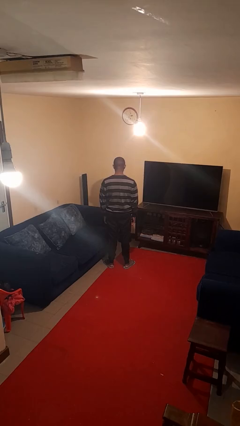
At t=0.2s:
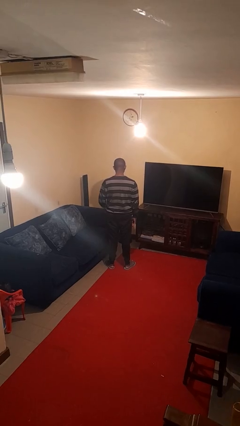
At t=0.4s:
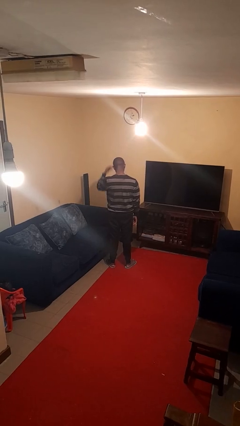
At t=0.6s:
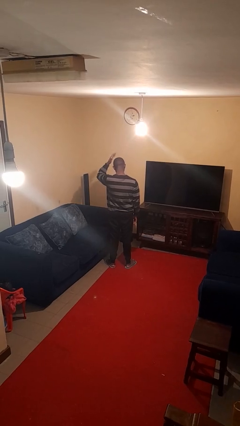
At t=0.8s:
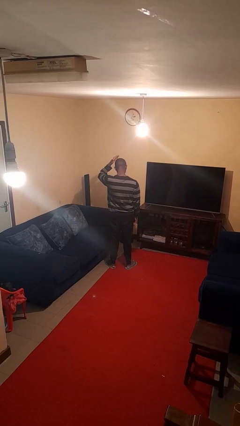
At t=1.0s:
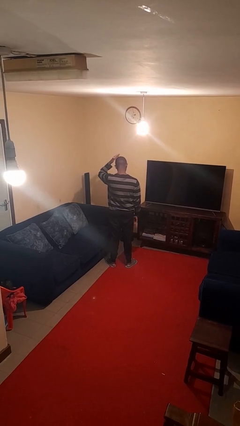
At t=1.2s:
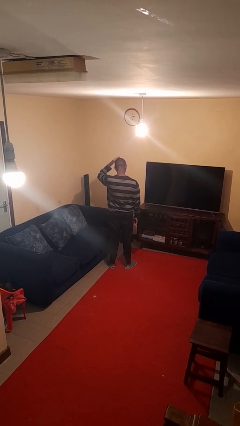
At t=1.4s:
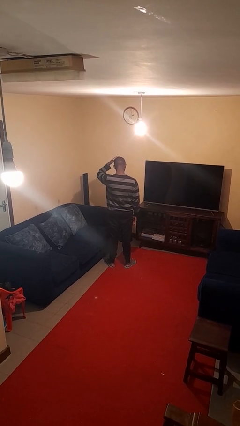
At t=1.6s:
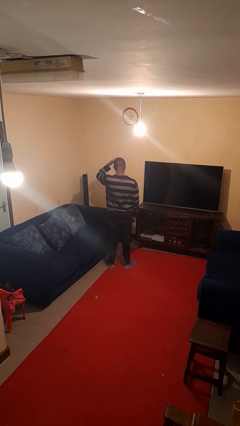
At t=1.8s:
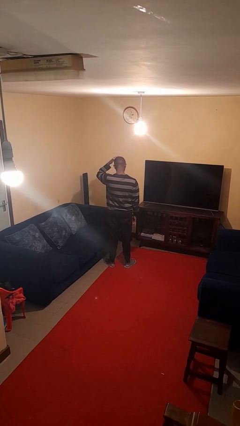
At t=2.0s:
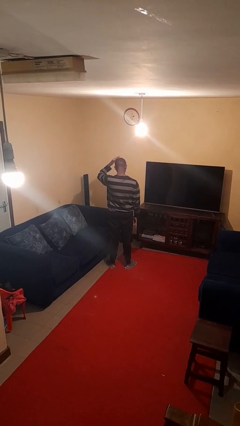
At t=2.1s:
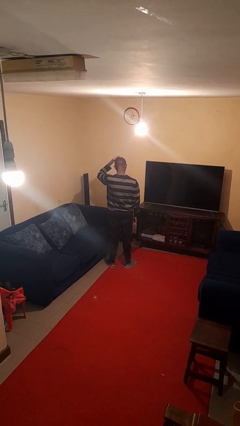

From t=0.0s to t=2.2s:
person pats head

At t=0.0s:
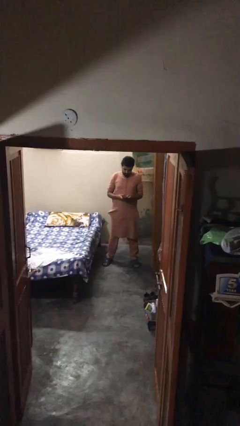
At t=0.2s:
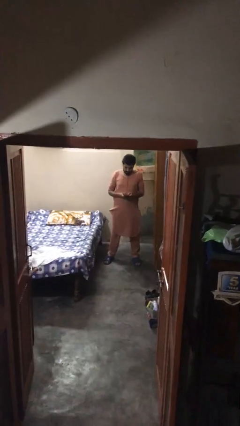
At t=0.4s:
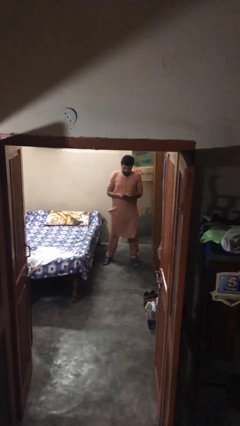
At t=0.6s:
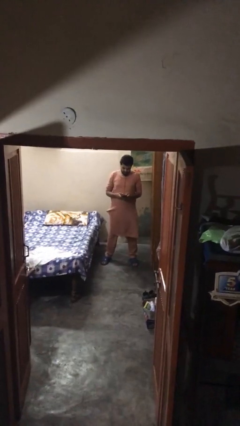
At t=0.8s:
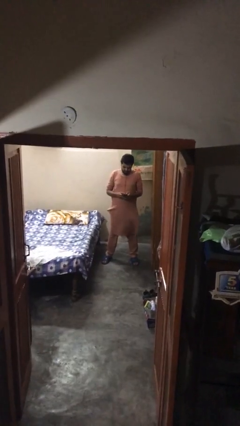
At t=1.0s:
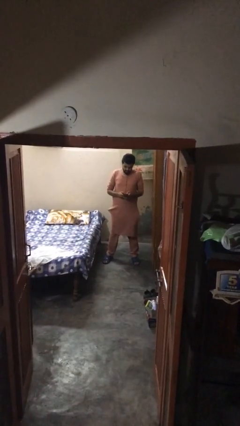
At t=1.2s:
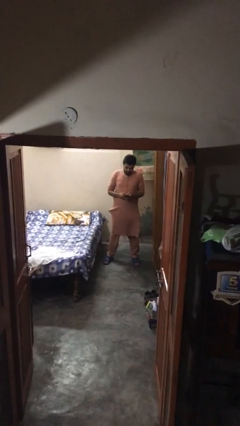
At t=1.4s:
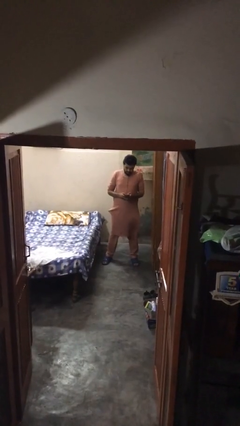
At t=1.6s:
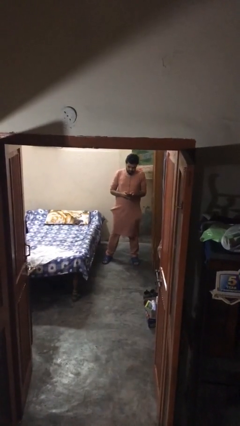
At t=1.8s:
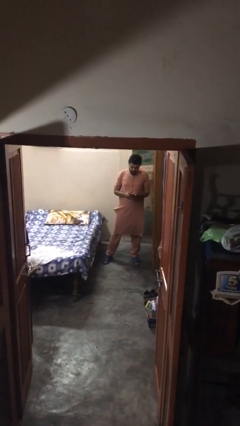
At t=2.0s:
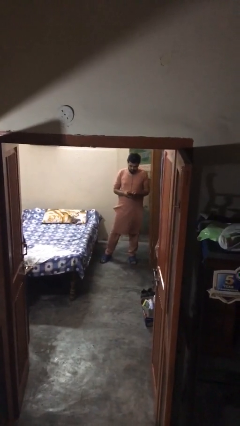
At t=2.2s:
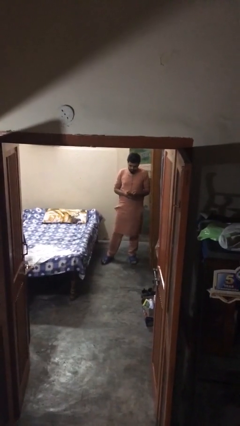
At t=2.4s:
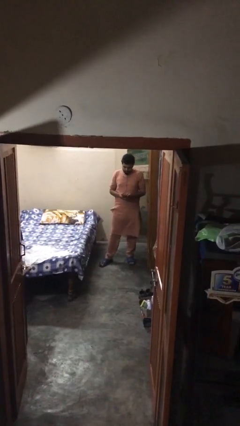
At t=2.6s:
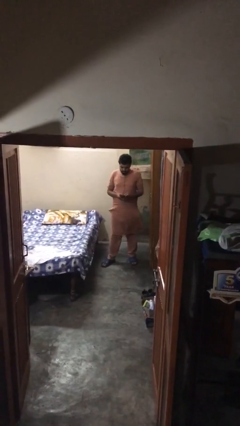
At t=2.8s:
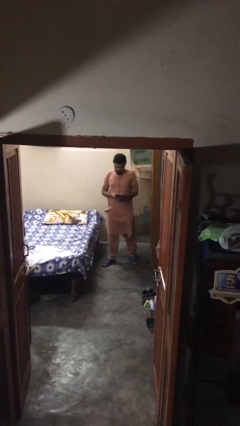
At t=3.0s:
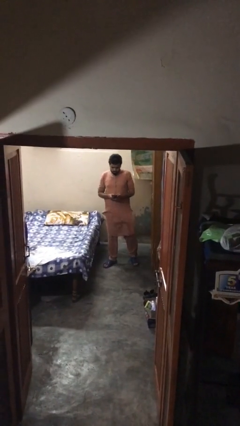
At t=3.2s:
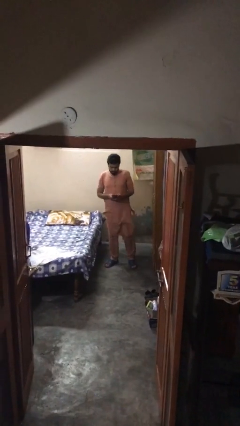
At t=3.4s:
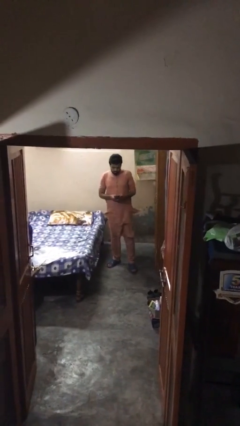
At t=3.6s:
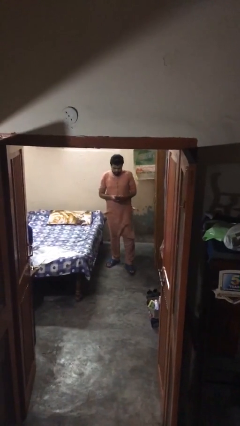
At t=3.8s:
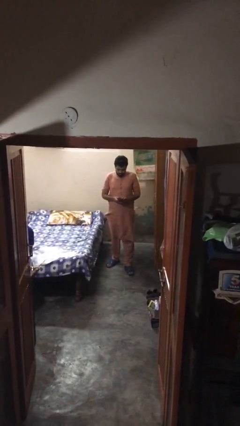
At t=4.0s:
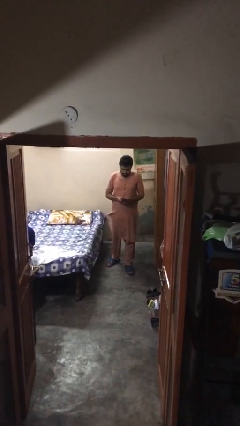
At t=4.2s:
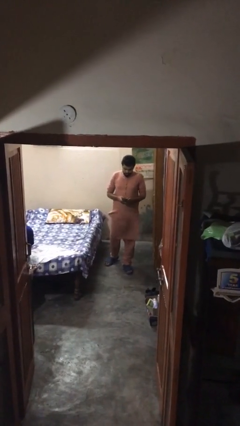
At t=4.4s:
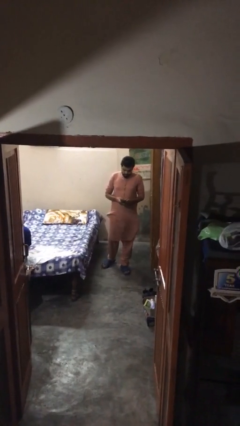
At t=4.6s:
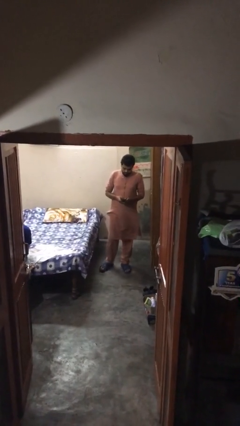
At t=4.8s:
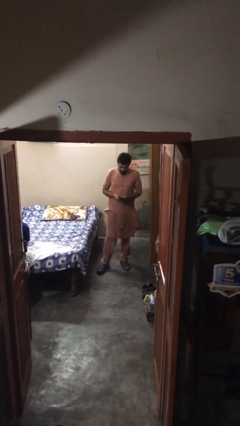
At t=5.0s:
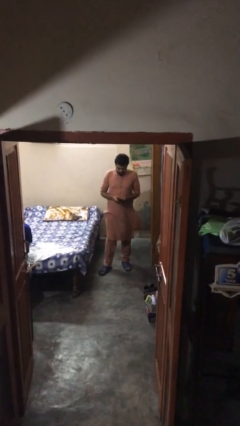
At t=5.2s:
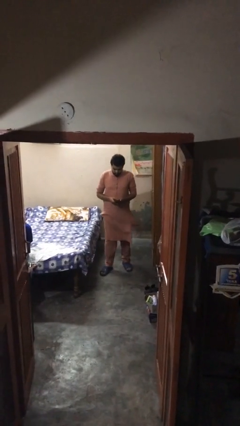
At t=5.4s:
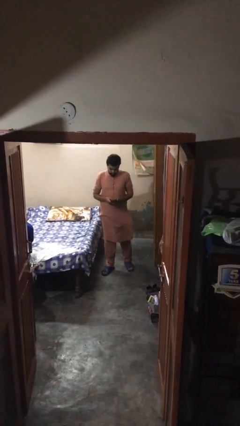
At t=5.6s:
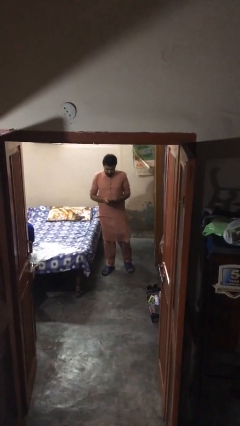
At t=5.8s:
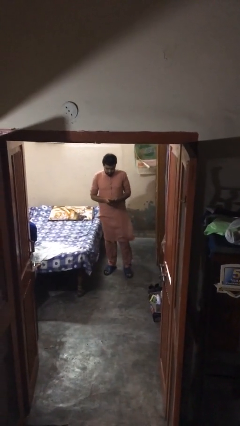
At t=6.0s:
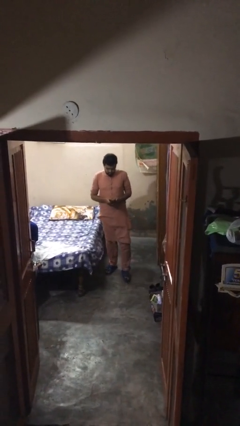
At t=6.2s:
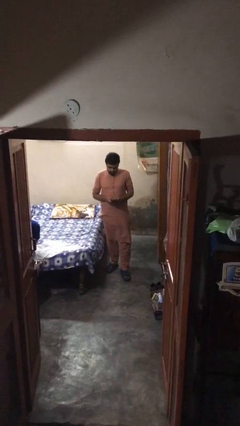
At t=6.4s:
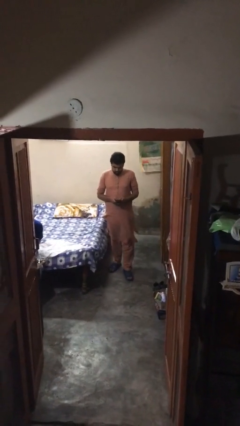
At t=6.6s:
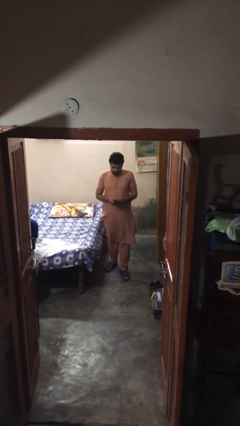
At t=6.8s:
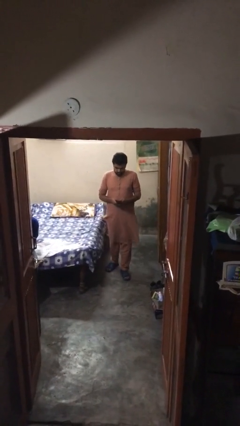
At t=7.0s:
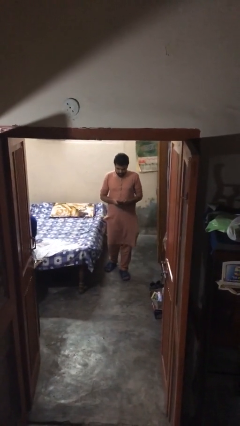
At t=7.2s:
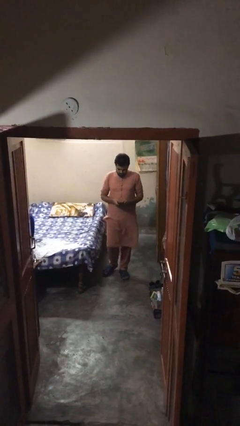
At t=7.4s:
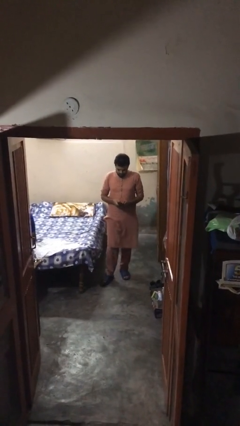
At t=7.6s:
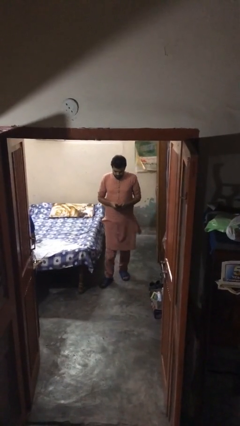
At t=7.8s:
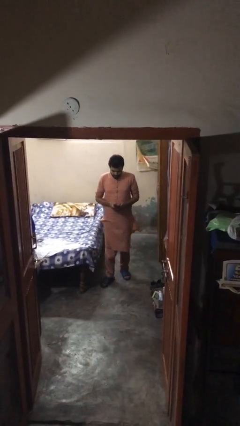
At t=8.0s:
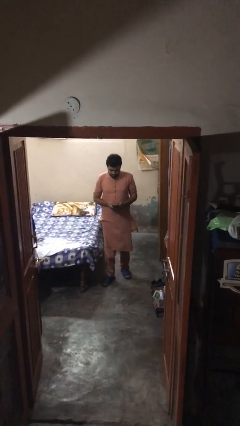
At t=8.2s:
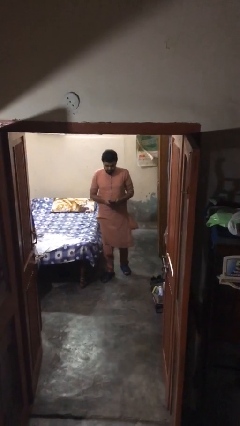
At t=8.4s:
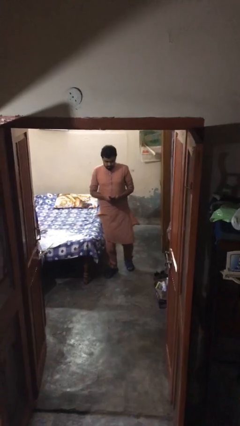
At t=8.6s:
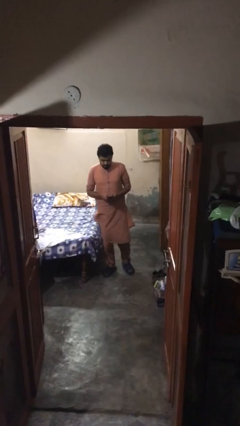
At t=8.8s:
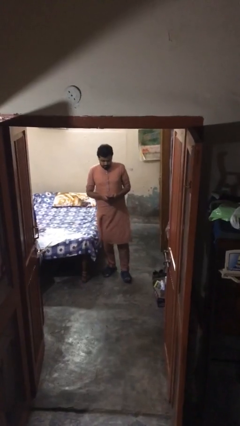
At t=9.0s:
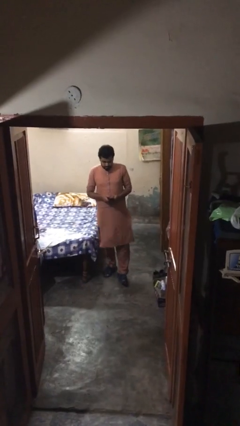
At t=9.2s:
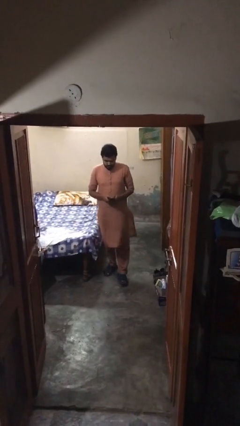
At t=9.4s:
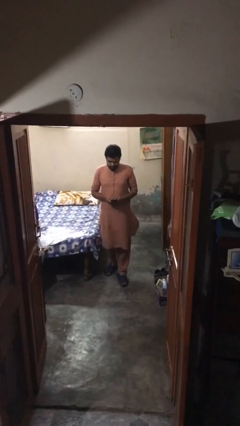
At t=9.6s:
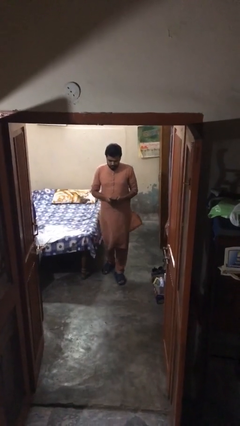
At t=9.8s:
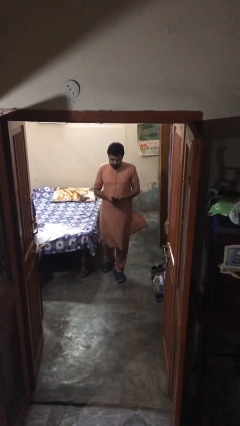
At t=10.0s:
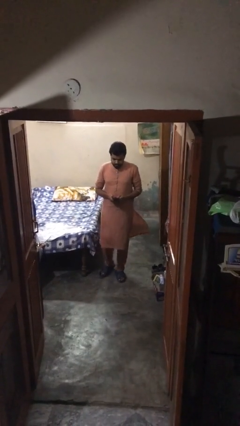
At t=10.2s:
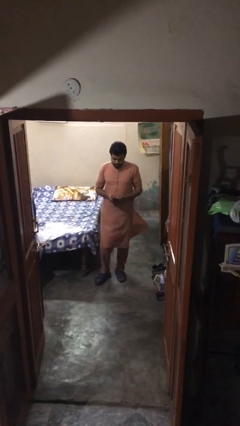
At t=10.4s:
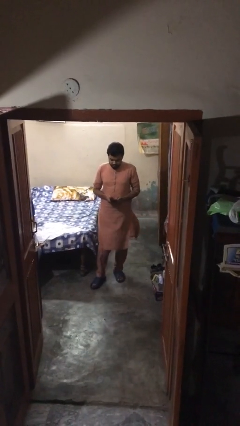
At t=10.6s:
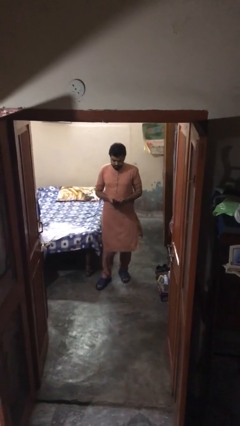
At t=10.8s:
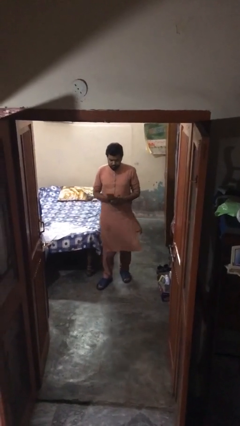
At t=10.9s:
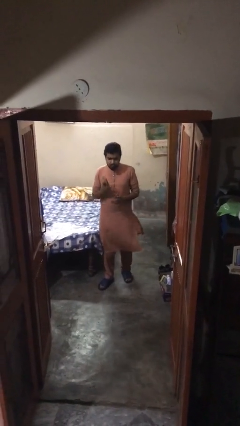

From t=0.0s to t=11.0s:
person texts on phone

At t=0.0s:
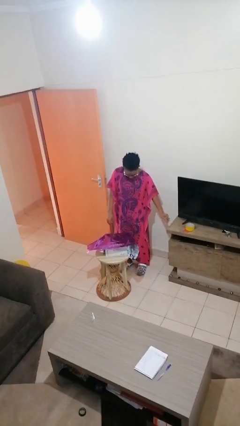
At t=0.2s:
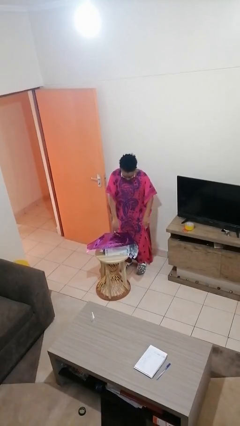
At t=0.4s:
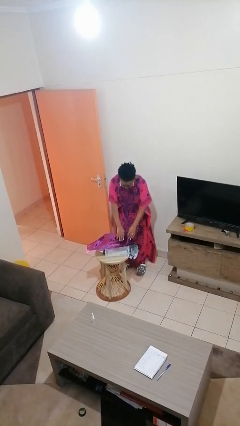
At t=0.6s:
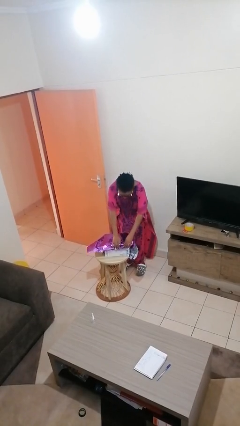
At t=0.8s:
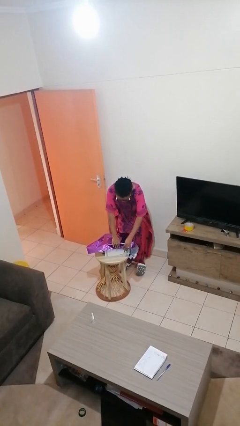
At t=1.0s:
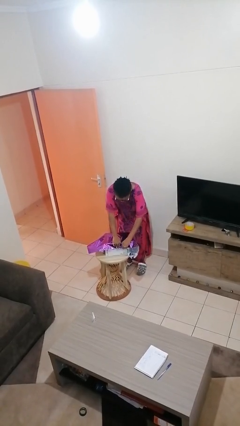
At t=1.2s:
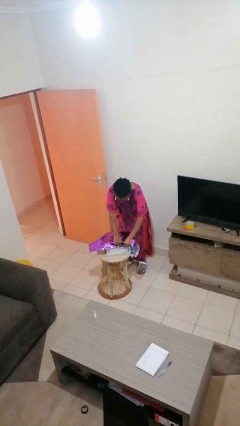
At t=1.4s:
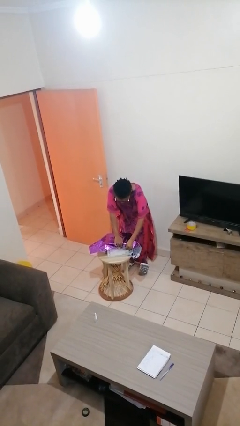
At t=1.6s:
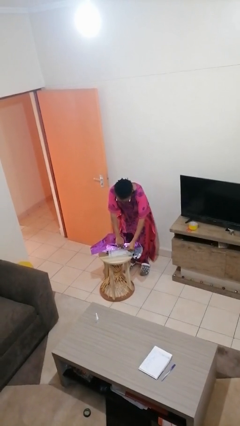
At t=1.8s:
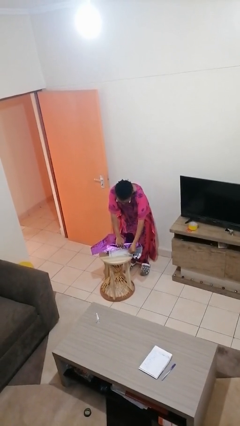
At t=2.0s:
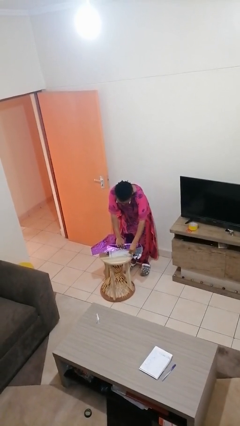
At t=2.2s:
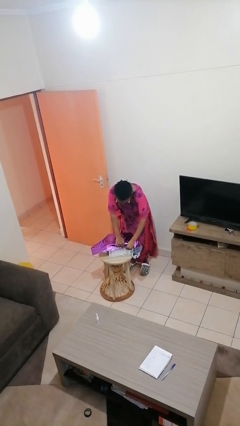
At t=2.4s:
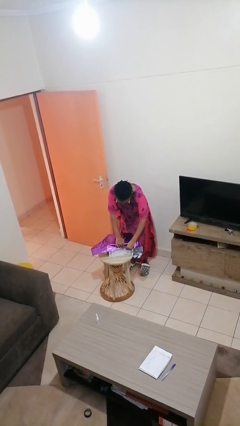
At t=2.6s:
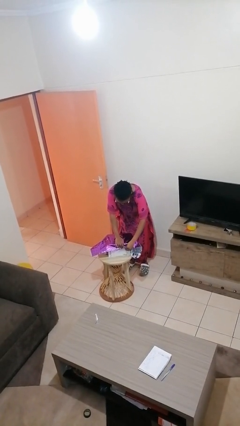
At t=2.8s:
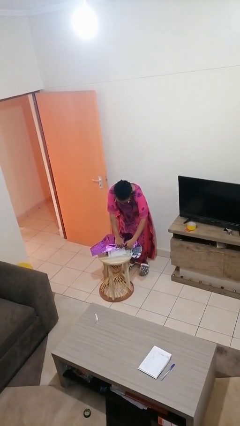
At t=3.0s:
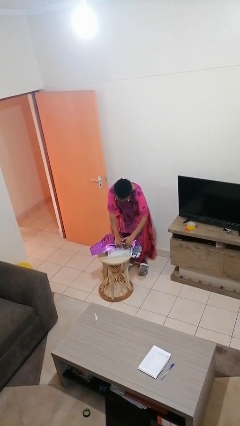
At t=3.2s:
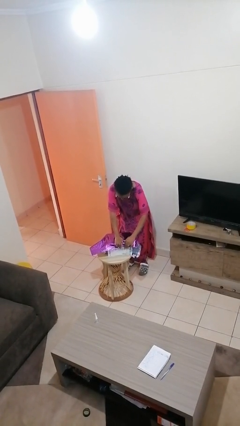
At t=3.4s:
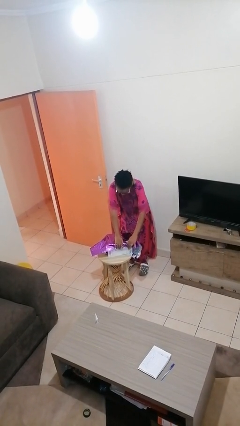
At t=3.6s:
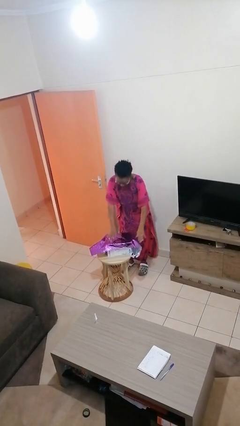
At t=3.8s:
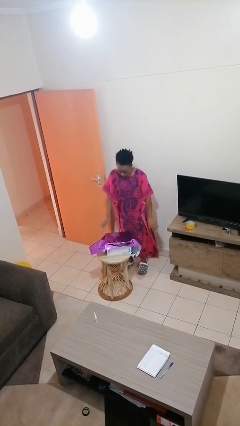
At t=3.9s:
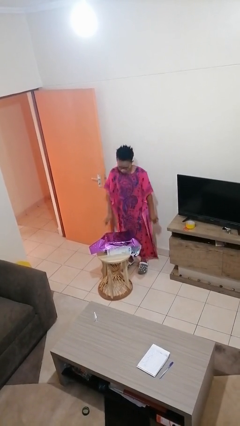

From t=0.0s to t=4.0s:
person wraps box

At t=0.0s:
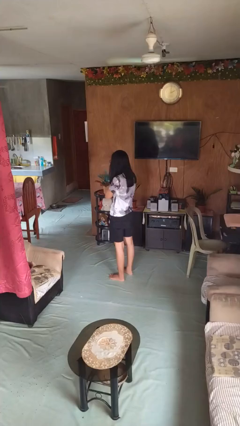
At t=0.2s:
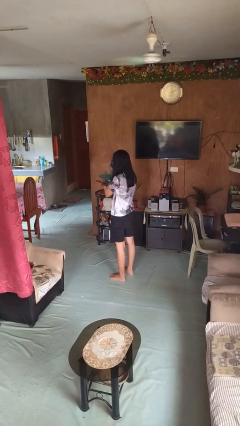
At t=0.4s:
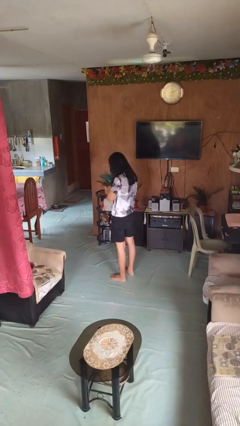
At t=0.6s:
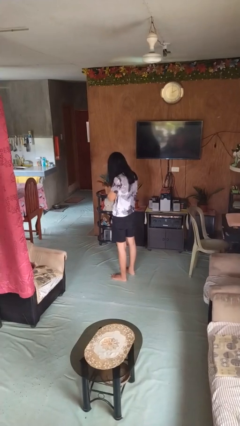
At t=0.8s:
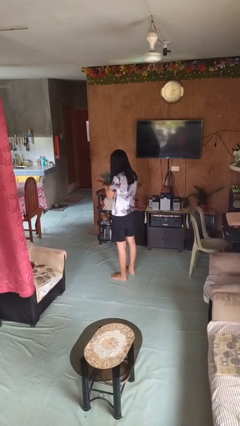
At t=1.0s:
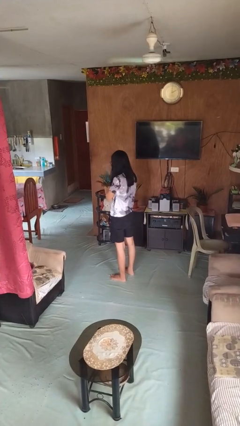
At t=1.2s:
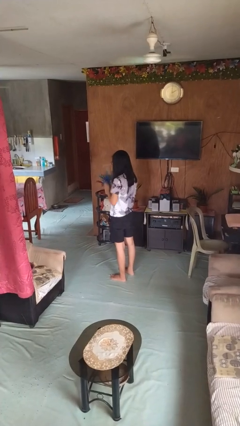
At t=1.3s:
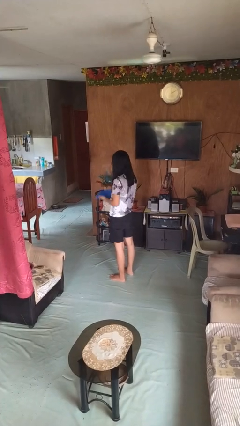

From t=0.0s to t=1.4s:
person blows nose
